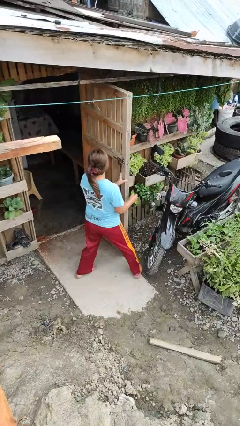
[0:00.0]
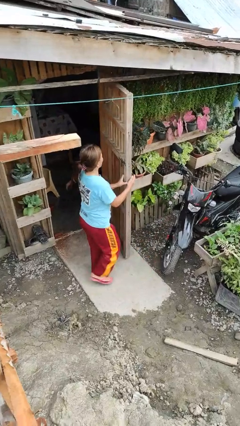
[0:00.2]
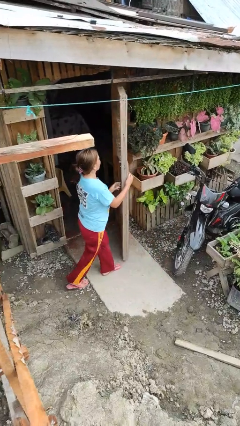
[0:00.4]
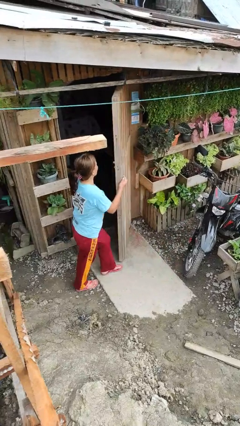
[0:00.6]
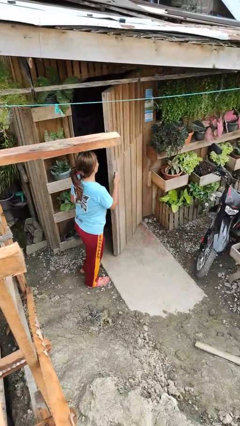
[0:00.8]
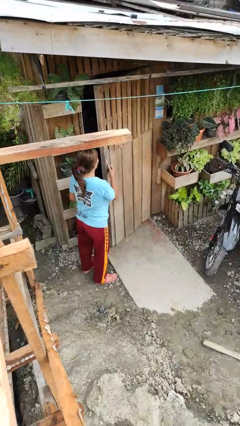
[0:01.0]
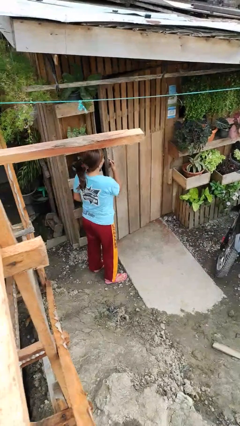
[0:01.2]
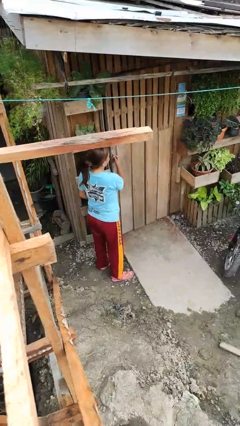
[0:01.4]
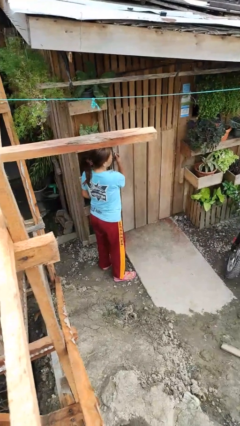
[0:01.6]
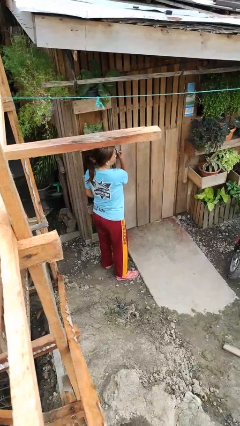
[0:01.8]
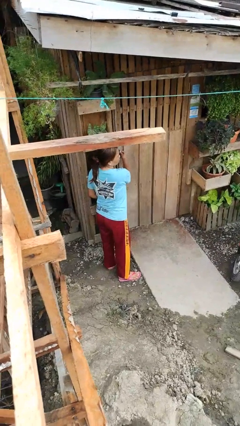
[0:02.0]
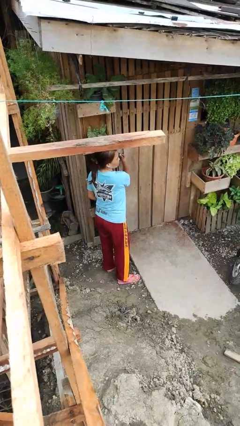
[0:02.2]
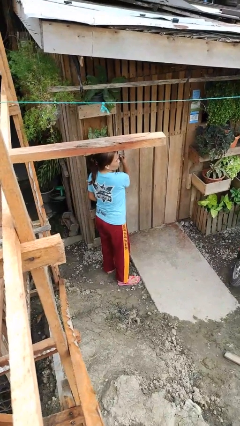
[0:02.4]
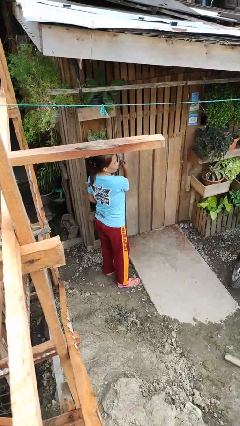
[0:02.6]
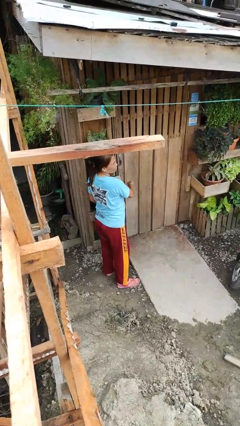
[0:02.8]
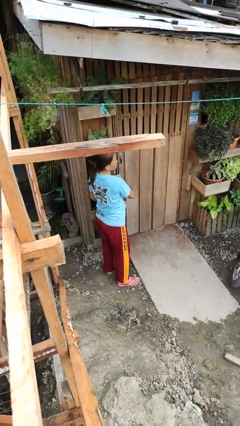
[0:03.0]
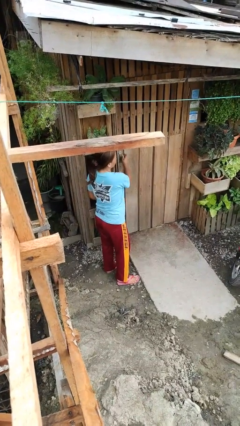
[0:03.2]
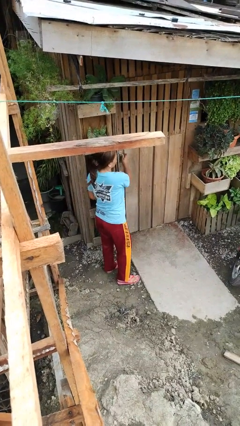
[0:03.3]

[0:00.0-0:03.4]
person closes facility door

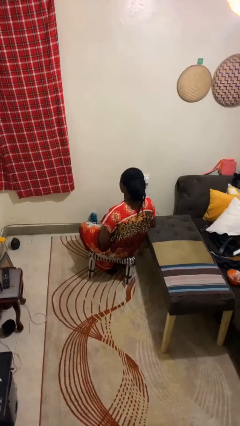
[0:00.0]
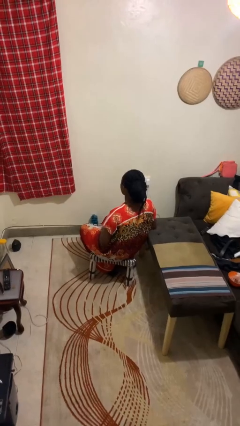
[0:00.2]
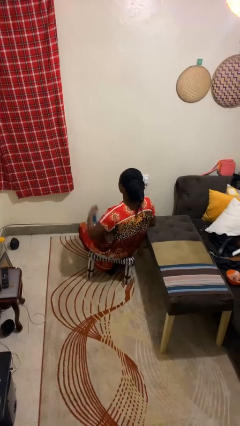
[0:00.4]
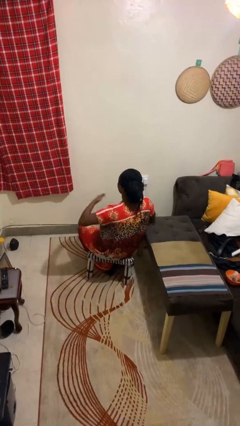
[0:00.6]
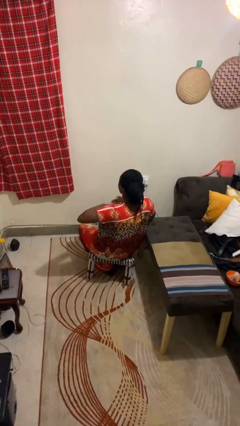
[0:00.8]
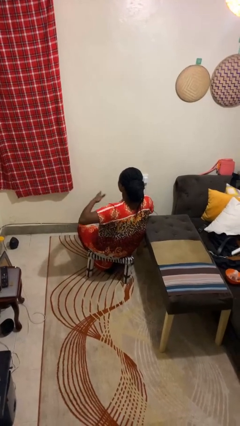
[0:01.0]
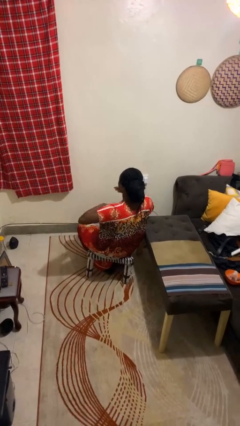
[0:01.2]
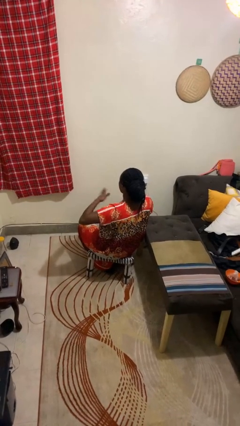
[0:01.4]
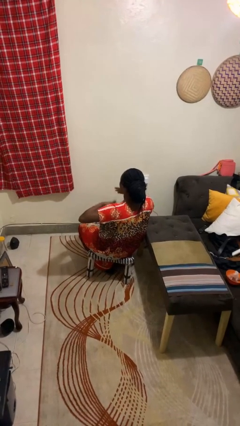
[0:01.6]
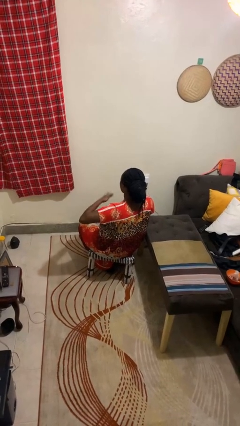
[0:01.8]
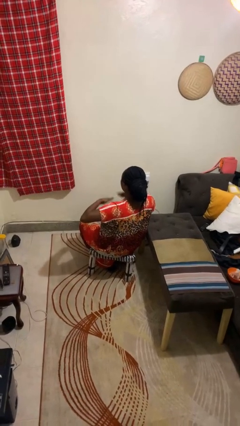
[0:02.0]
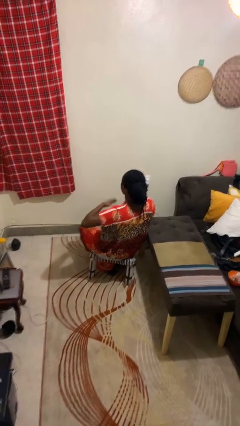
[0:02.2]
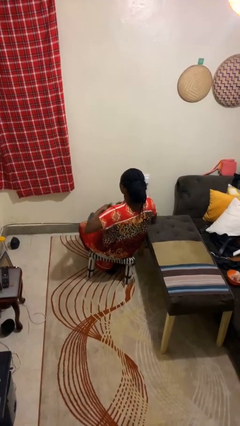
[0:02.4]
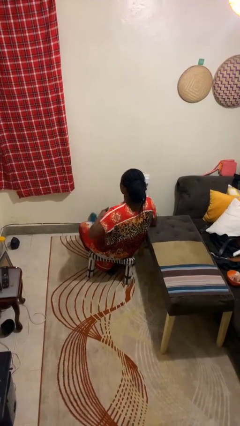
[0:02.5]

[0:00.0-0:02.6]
person drums on chest

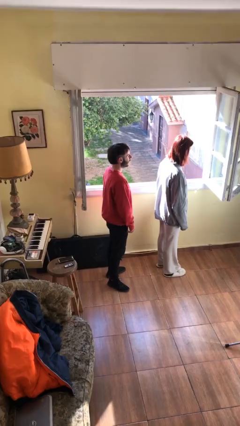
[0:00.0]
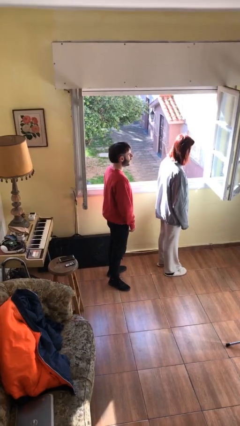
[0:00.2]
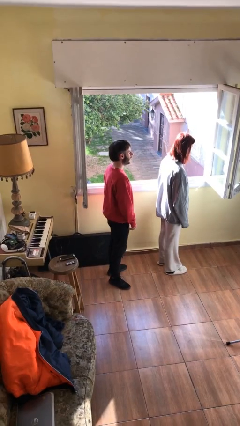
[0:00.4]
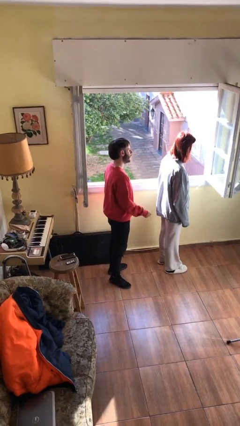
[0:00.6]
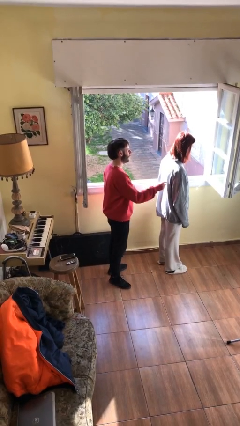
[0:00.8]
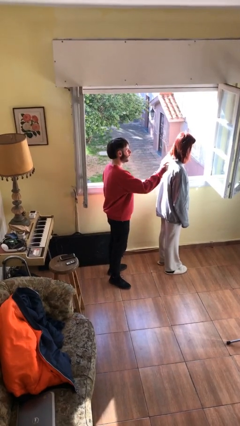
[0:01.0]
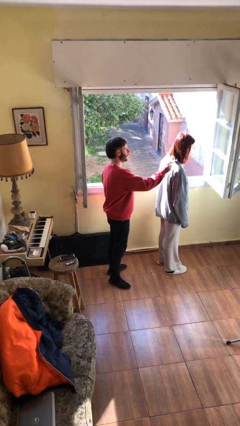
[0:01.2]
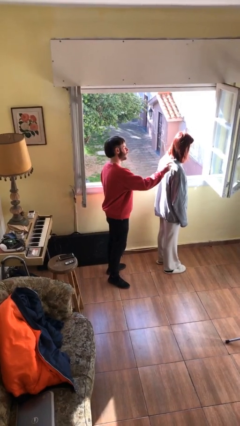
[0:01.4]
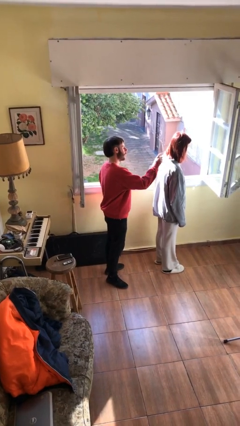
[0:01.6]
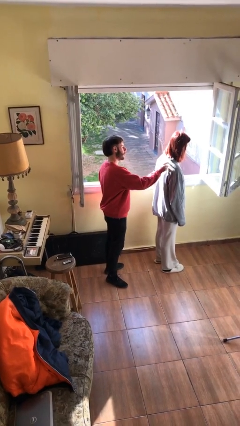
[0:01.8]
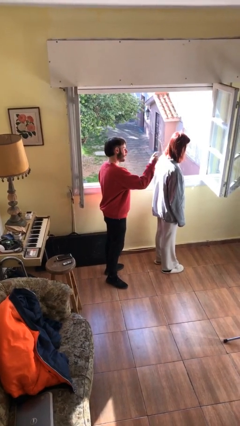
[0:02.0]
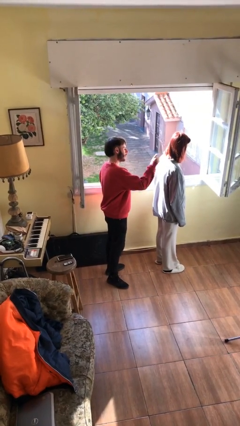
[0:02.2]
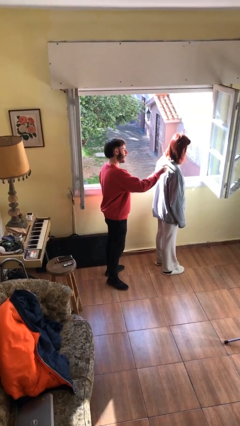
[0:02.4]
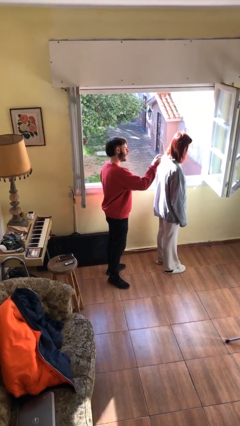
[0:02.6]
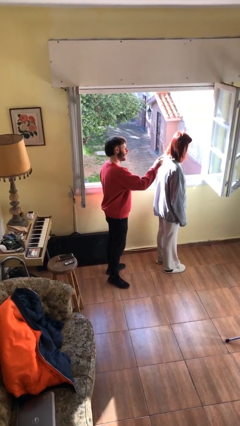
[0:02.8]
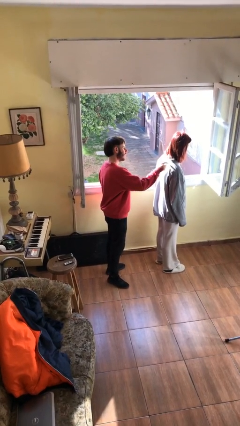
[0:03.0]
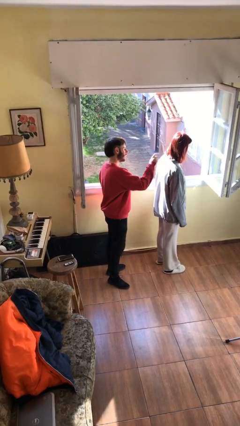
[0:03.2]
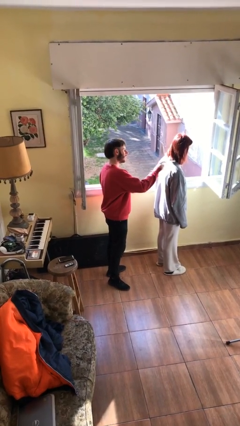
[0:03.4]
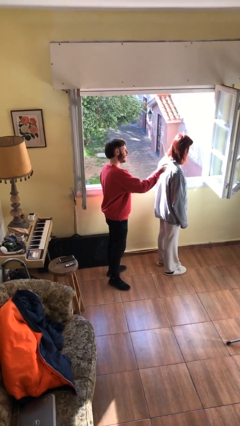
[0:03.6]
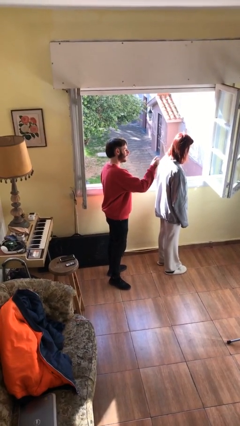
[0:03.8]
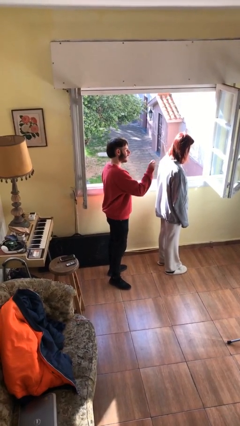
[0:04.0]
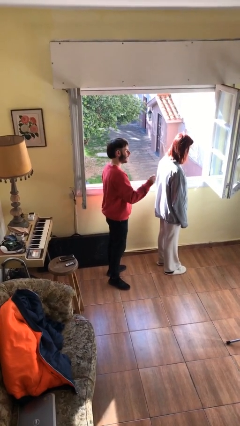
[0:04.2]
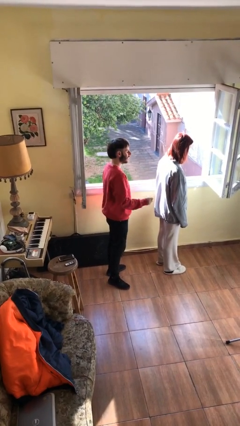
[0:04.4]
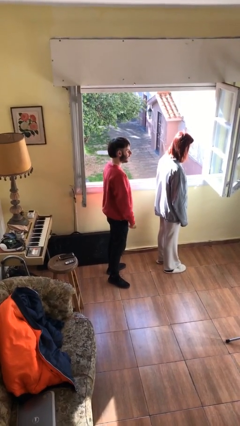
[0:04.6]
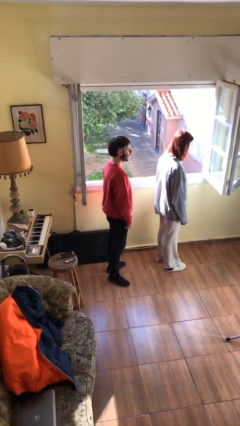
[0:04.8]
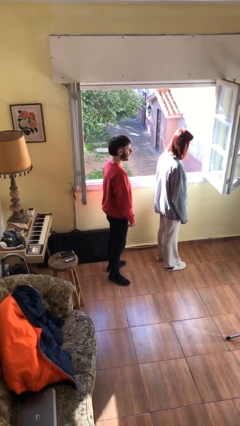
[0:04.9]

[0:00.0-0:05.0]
person touches back of person

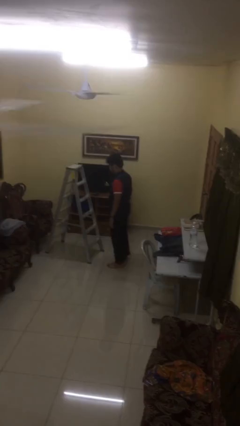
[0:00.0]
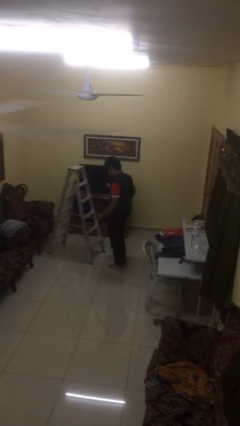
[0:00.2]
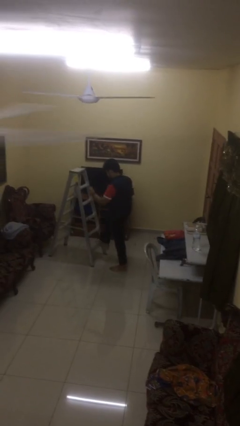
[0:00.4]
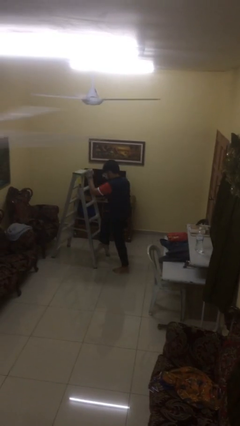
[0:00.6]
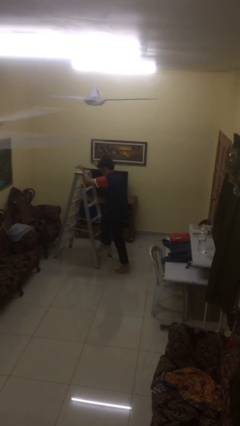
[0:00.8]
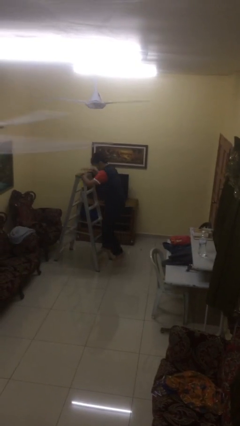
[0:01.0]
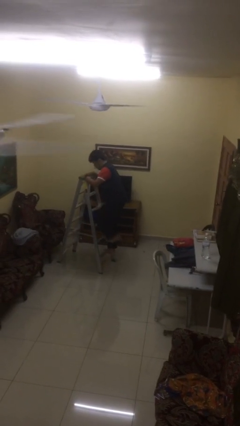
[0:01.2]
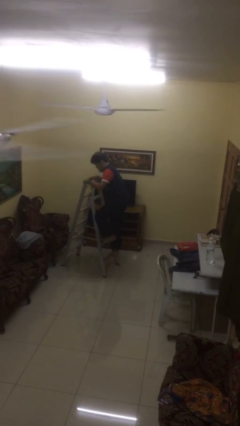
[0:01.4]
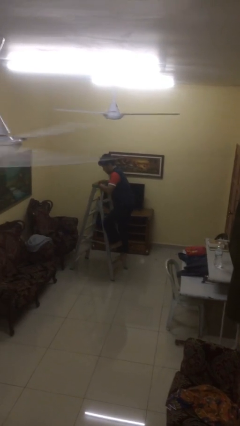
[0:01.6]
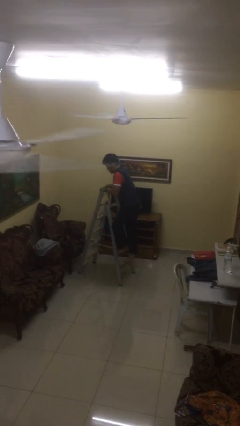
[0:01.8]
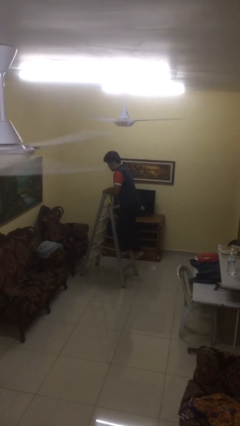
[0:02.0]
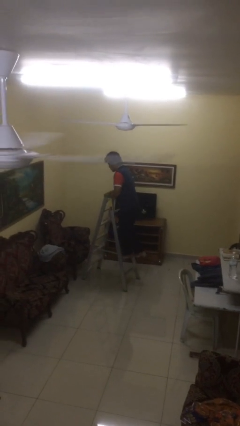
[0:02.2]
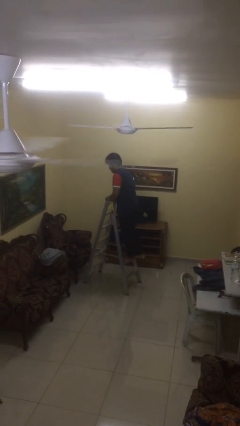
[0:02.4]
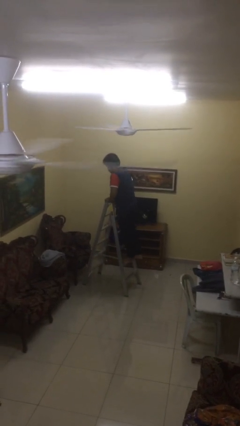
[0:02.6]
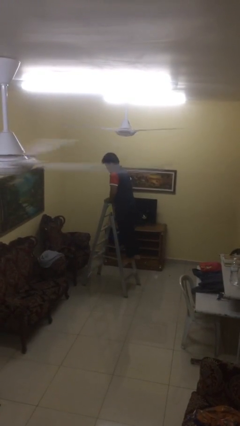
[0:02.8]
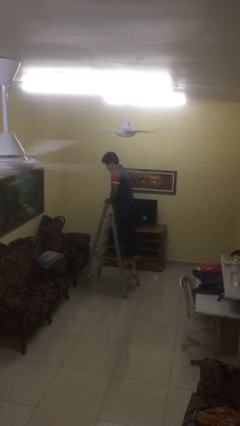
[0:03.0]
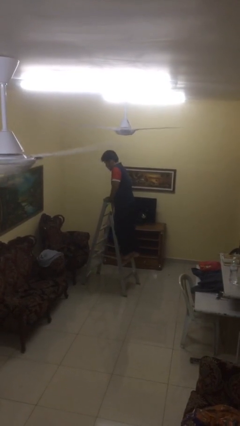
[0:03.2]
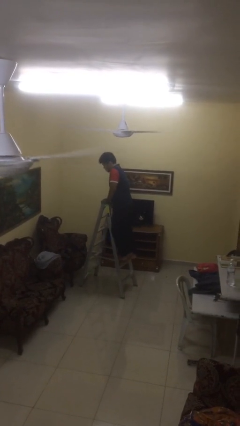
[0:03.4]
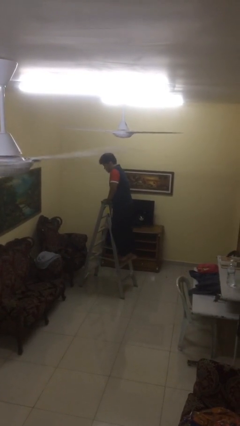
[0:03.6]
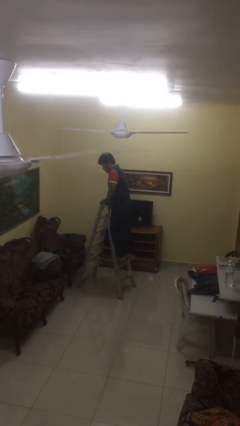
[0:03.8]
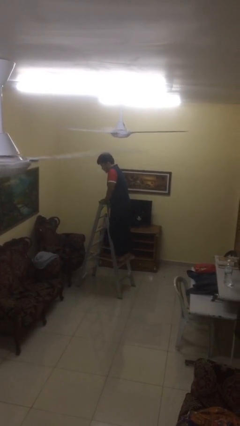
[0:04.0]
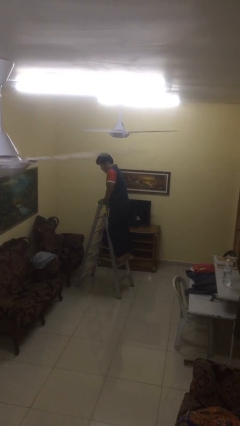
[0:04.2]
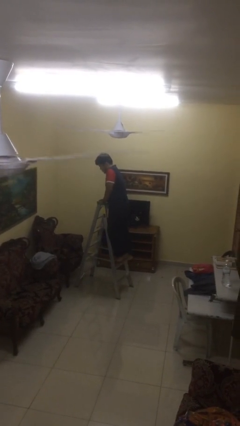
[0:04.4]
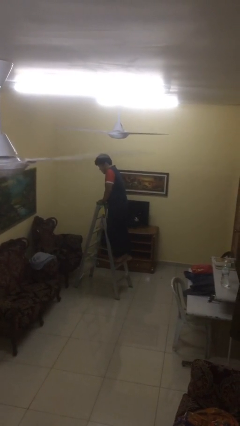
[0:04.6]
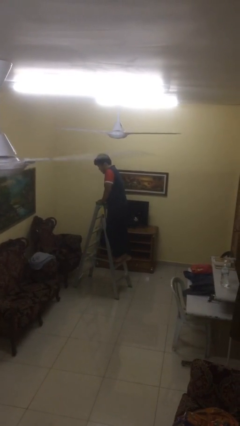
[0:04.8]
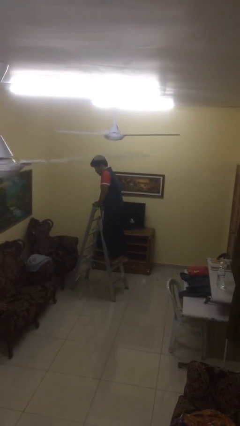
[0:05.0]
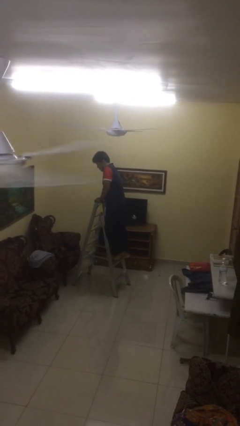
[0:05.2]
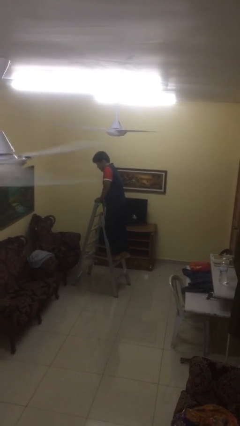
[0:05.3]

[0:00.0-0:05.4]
person climbs up ladder

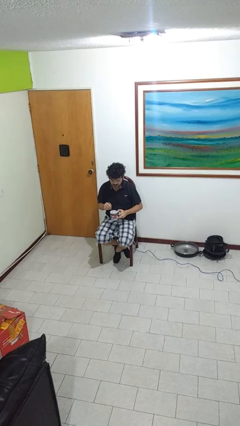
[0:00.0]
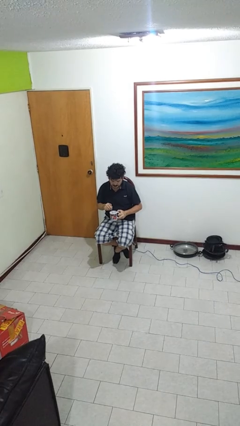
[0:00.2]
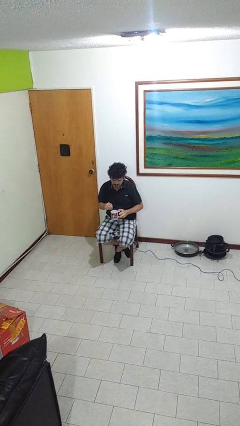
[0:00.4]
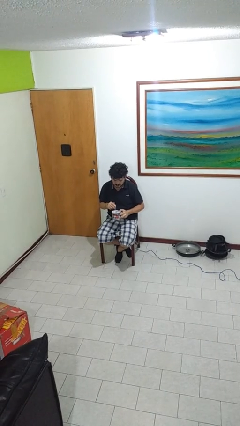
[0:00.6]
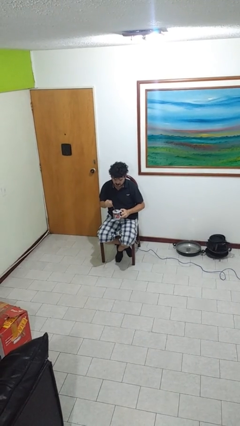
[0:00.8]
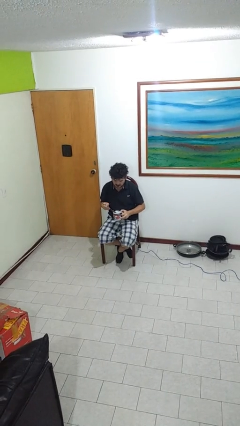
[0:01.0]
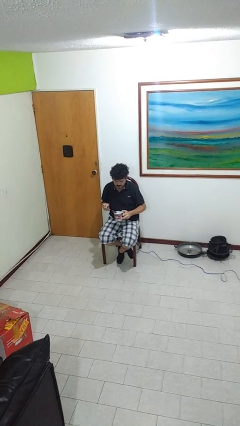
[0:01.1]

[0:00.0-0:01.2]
person stirs mug

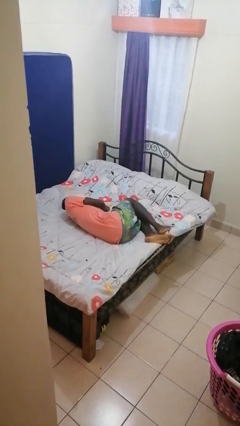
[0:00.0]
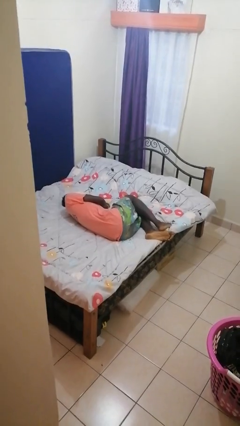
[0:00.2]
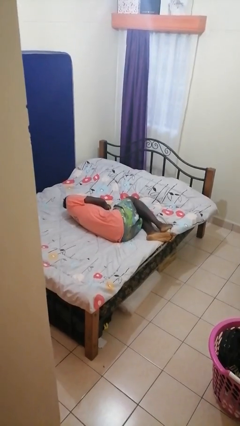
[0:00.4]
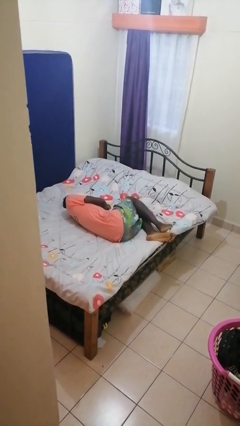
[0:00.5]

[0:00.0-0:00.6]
person puts on shoes
